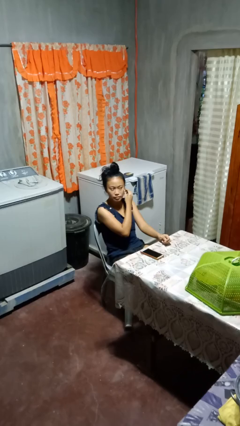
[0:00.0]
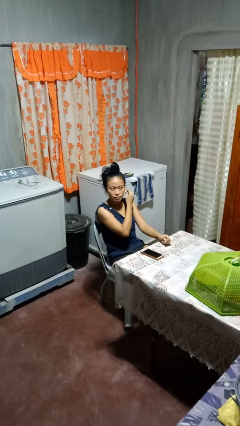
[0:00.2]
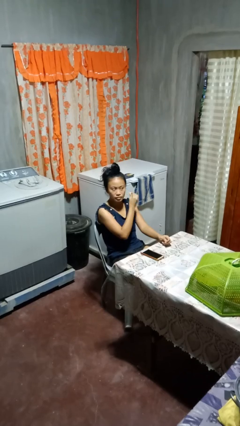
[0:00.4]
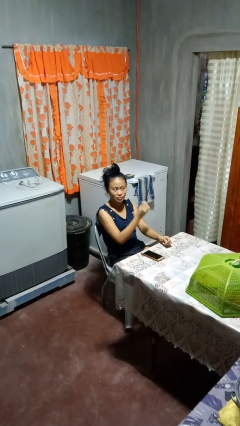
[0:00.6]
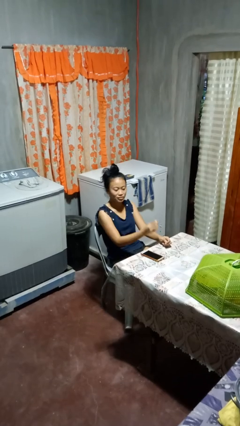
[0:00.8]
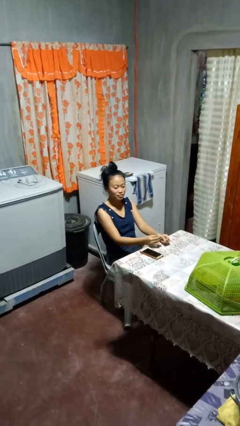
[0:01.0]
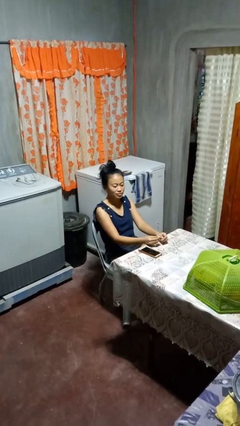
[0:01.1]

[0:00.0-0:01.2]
person takes off earrings

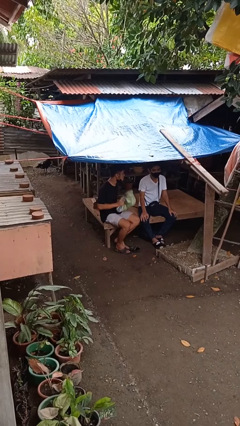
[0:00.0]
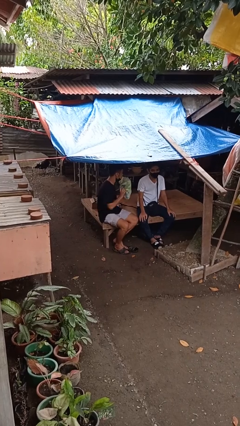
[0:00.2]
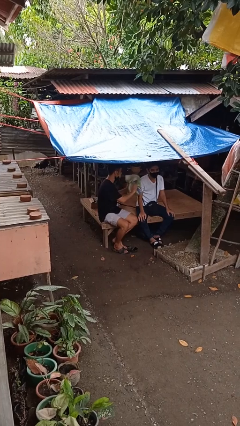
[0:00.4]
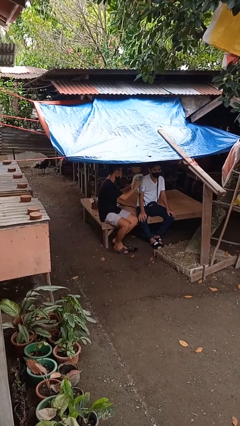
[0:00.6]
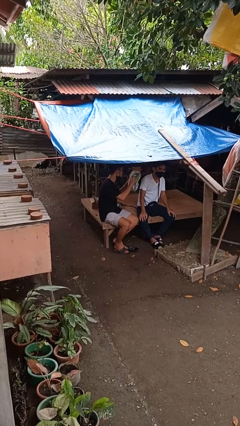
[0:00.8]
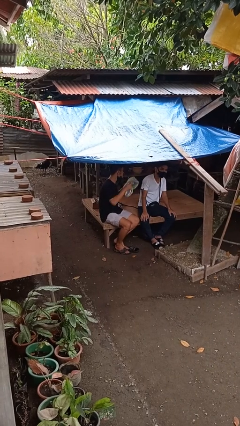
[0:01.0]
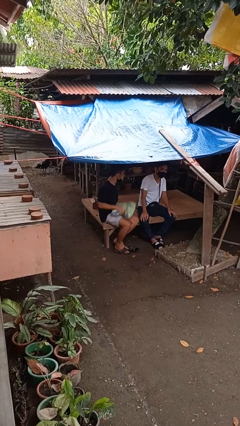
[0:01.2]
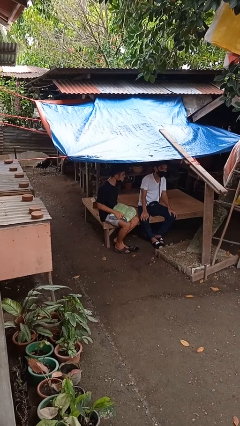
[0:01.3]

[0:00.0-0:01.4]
person hits person with pillow

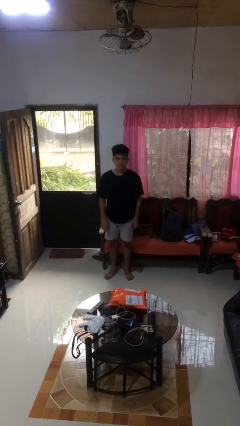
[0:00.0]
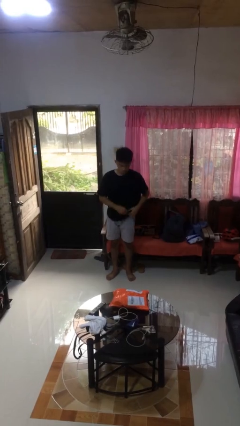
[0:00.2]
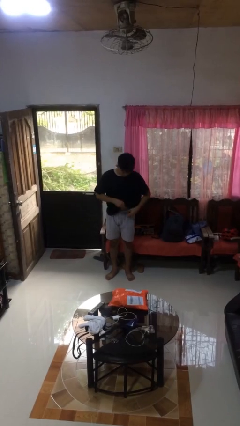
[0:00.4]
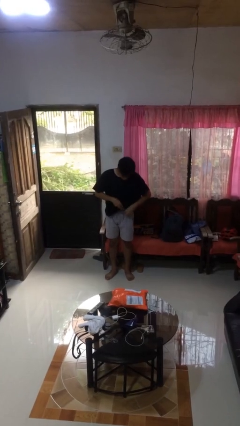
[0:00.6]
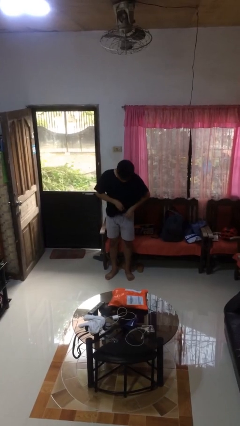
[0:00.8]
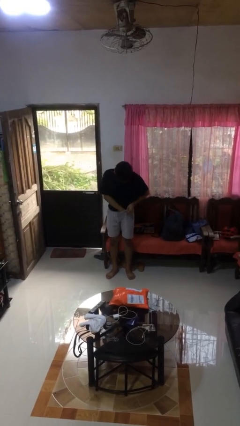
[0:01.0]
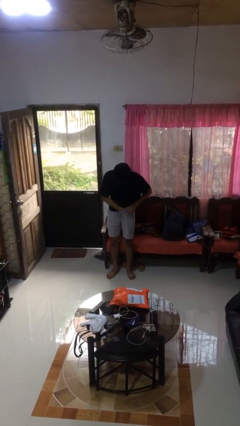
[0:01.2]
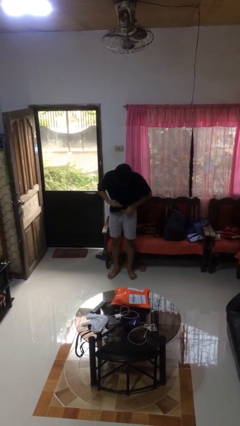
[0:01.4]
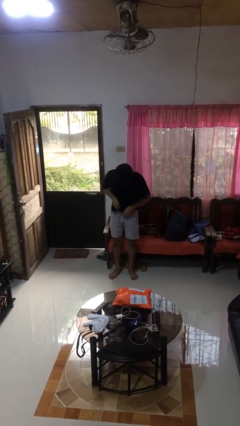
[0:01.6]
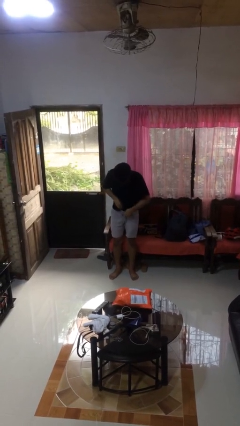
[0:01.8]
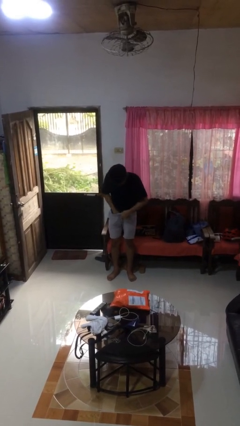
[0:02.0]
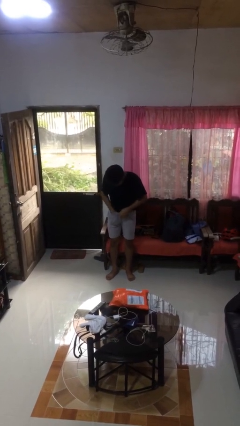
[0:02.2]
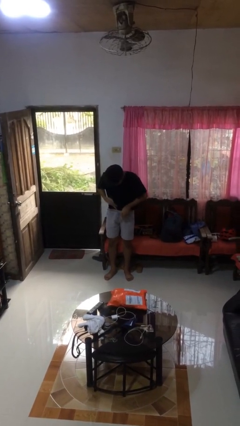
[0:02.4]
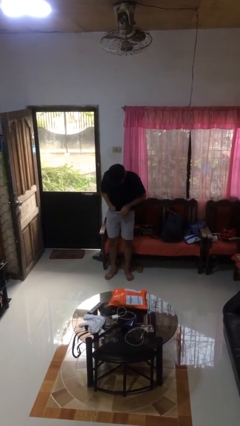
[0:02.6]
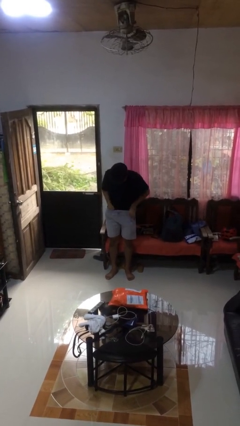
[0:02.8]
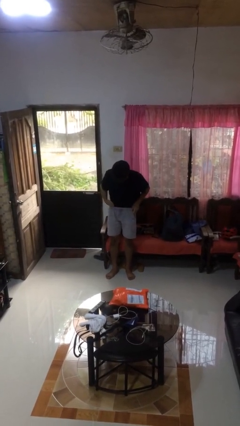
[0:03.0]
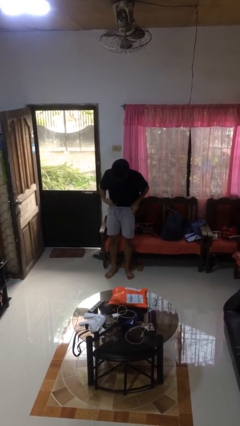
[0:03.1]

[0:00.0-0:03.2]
person tucks in shirt

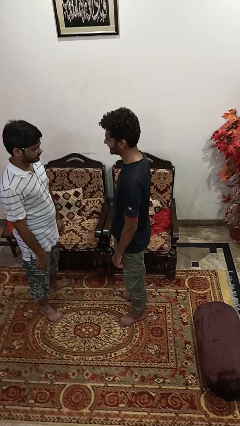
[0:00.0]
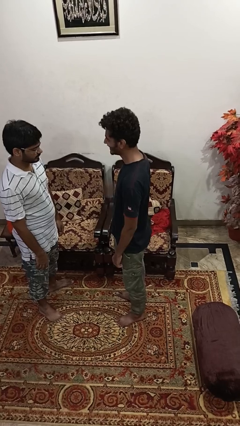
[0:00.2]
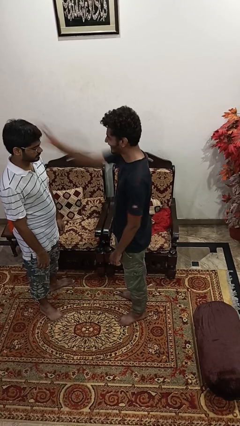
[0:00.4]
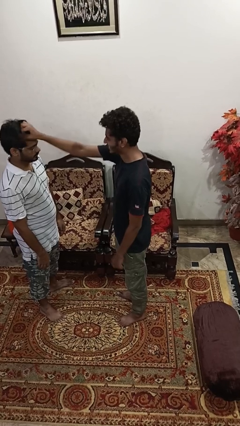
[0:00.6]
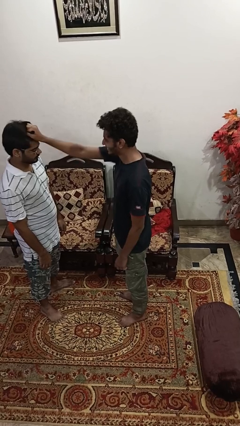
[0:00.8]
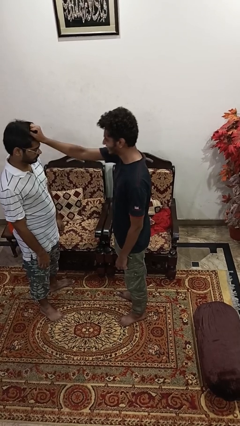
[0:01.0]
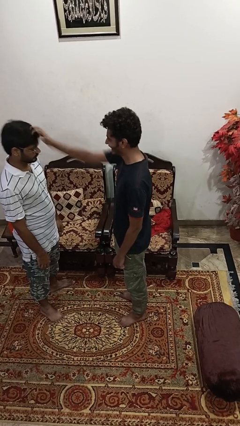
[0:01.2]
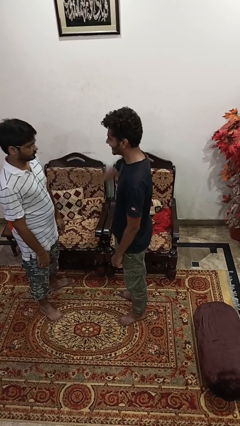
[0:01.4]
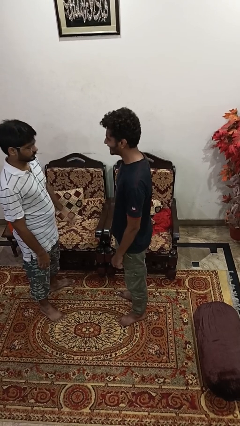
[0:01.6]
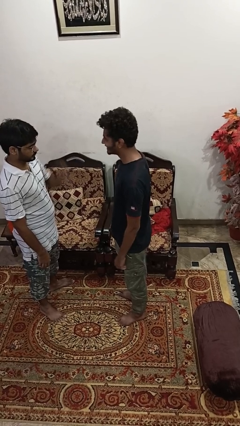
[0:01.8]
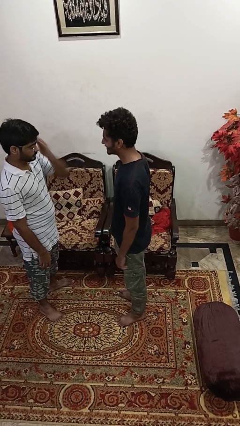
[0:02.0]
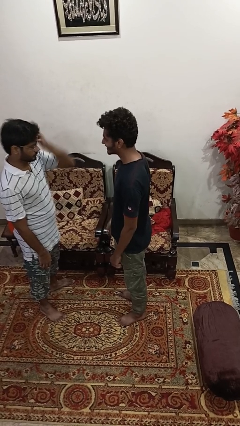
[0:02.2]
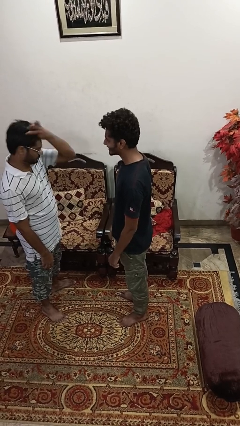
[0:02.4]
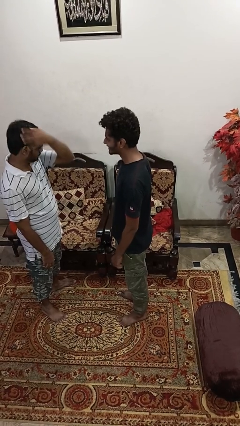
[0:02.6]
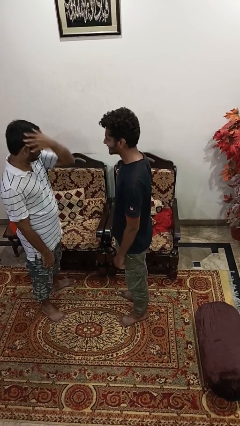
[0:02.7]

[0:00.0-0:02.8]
person grabs person by shoulder

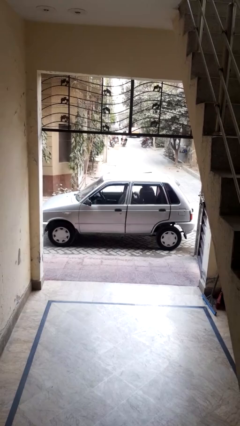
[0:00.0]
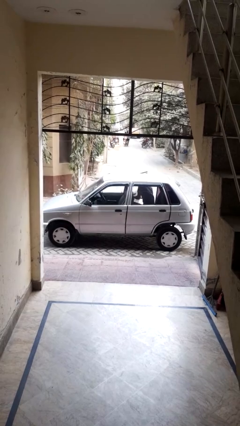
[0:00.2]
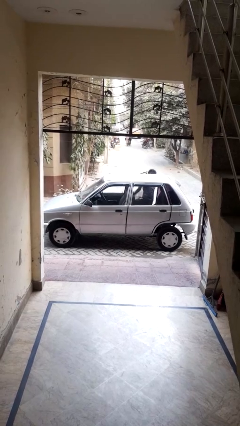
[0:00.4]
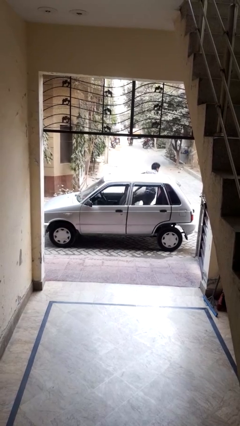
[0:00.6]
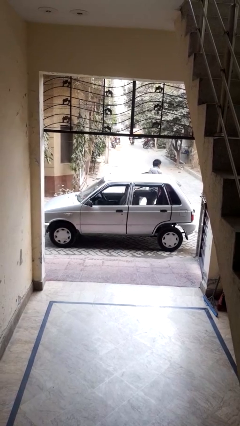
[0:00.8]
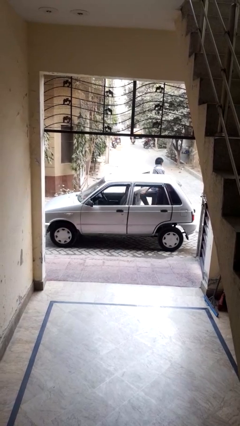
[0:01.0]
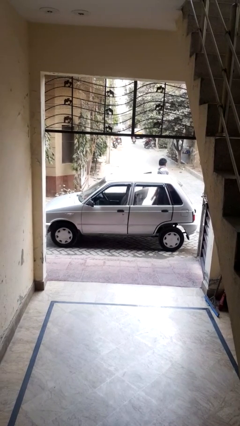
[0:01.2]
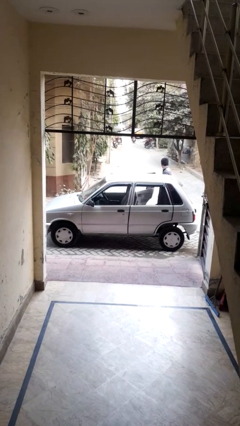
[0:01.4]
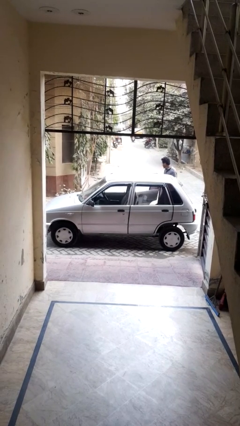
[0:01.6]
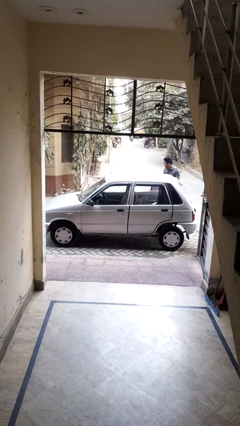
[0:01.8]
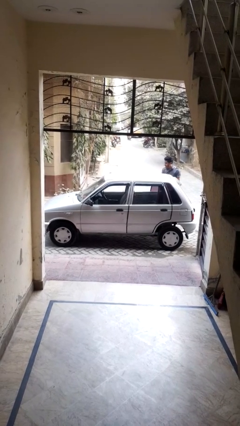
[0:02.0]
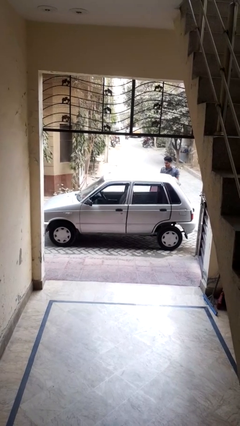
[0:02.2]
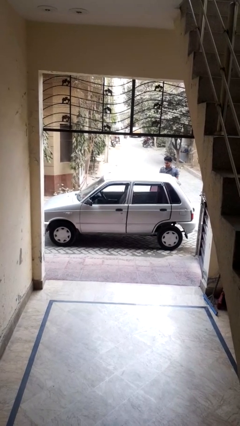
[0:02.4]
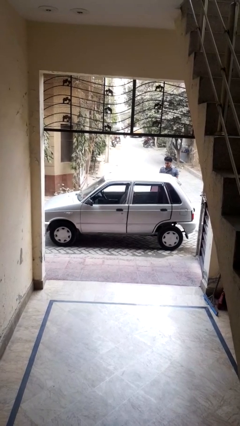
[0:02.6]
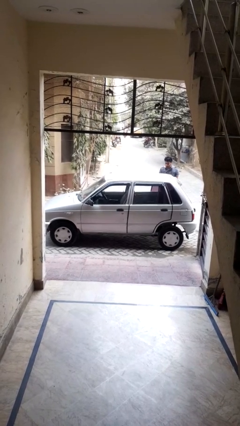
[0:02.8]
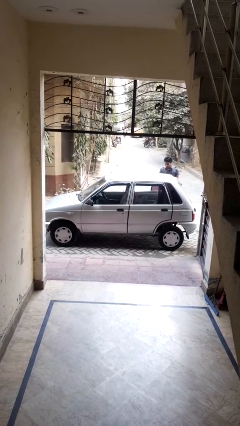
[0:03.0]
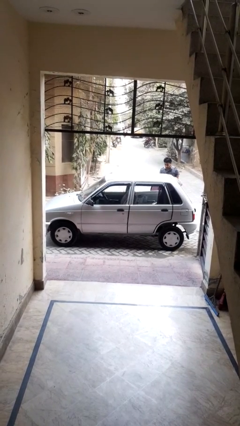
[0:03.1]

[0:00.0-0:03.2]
car drops off person

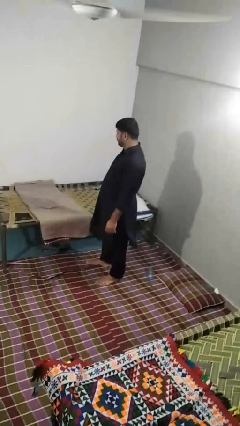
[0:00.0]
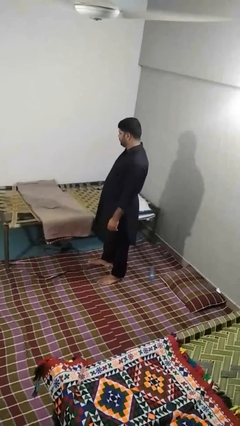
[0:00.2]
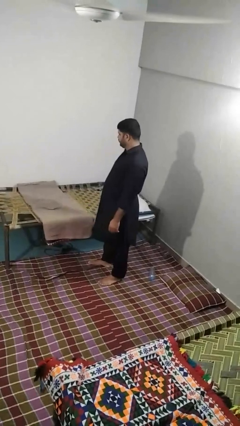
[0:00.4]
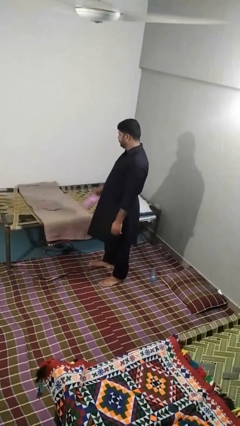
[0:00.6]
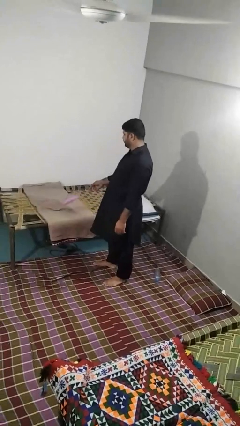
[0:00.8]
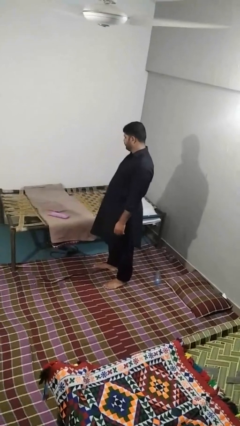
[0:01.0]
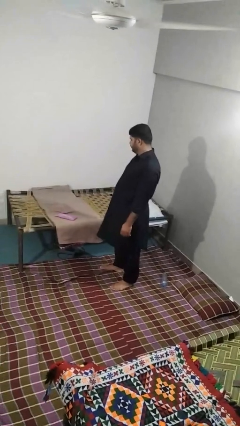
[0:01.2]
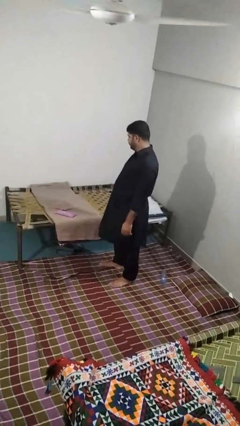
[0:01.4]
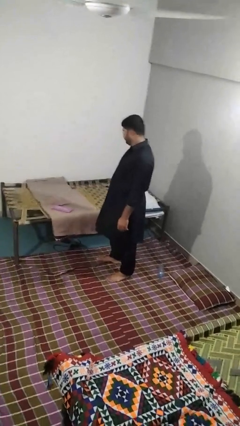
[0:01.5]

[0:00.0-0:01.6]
person puts down object on bed

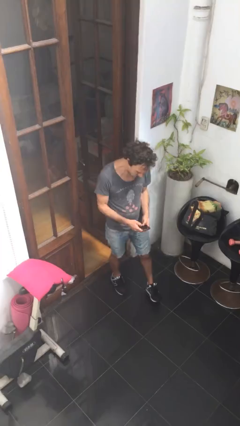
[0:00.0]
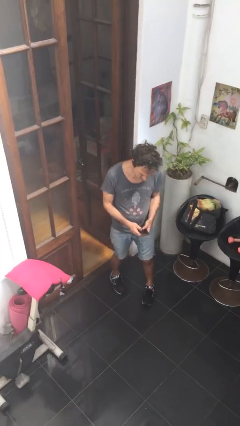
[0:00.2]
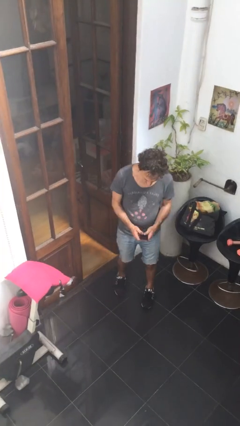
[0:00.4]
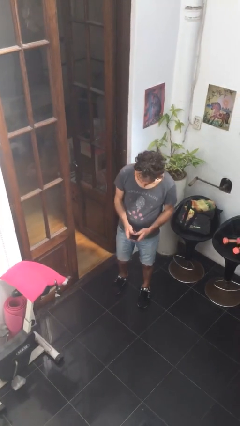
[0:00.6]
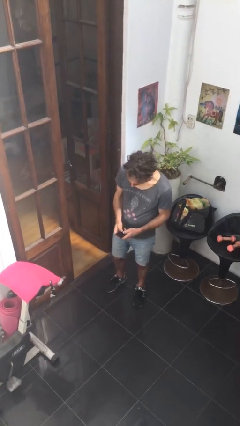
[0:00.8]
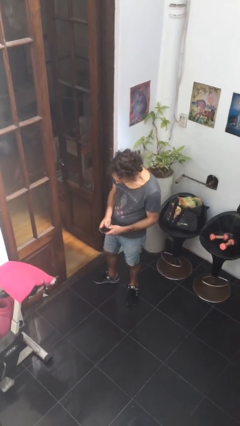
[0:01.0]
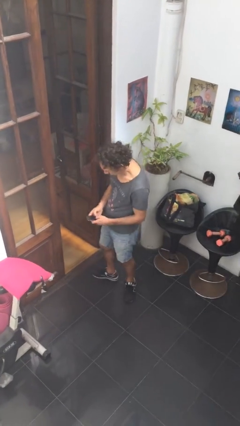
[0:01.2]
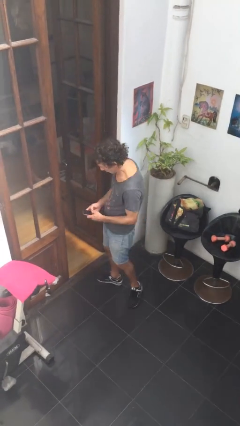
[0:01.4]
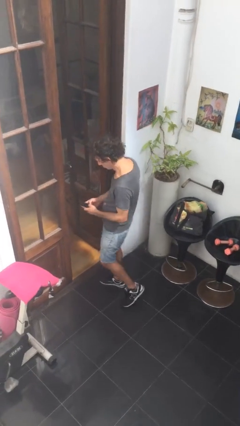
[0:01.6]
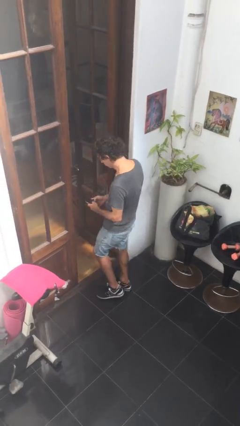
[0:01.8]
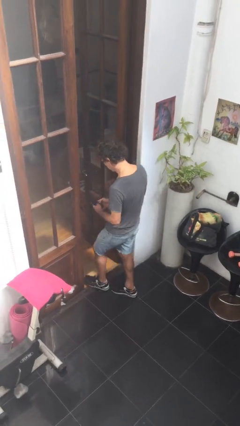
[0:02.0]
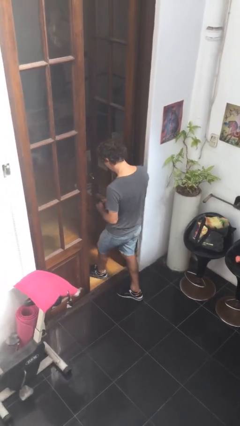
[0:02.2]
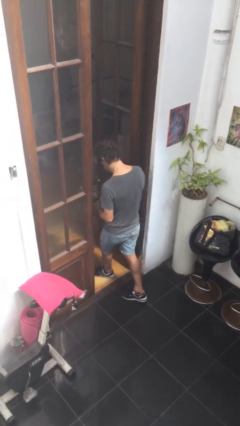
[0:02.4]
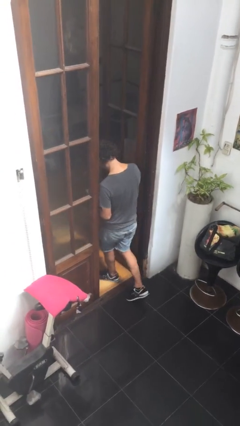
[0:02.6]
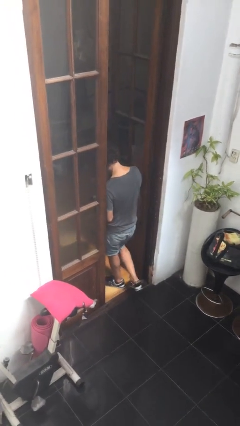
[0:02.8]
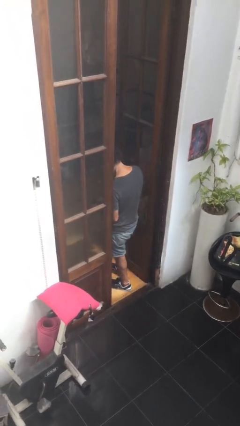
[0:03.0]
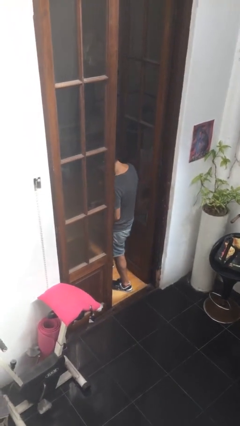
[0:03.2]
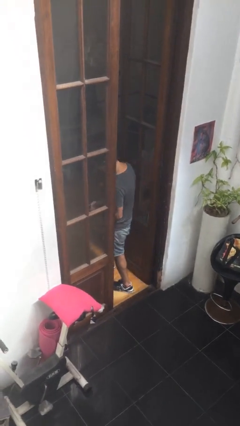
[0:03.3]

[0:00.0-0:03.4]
person exits scene through structure

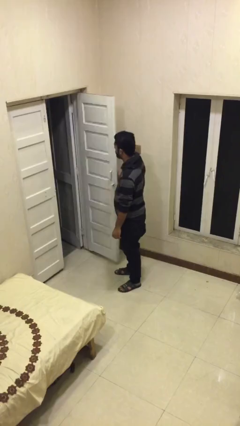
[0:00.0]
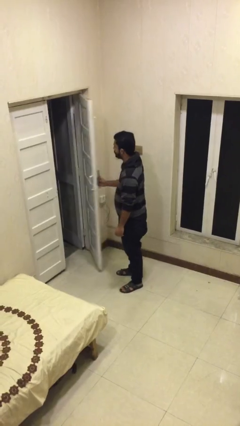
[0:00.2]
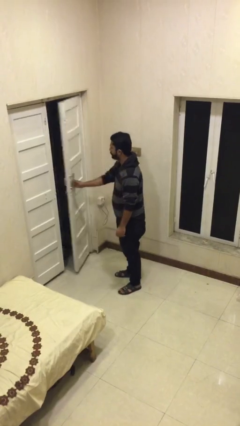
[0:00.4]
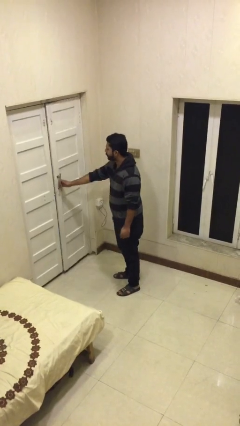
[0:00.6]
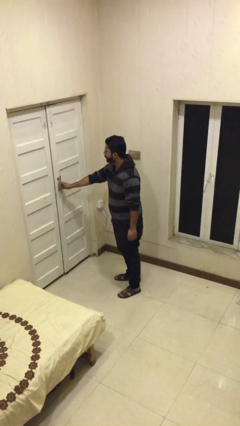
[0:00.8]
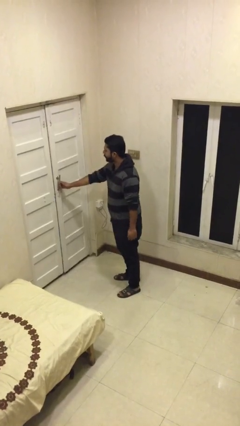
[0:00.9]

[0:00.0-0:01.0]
person closes facility door
